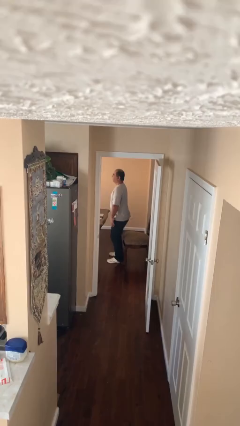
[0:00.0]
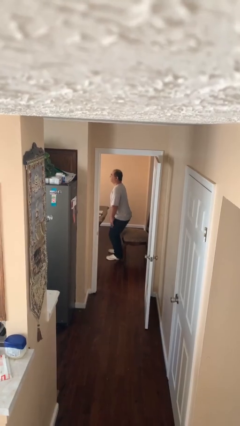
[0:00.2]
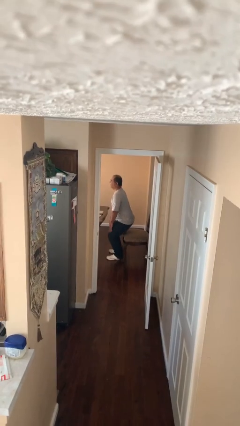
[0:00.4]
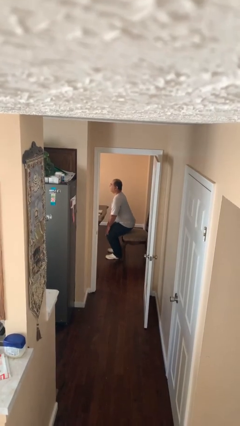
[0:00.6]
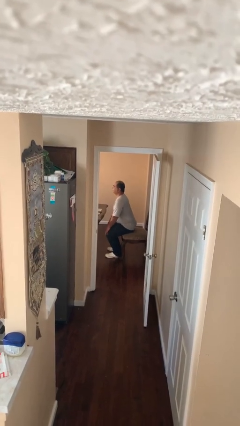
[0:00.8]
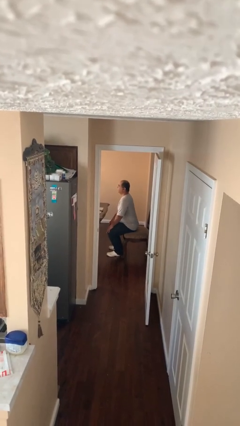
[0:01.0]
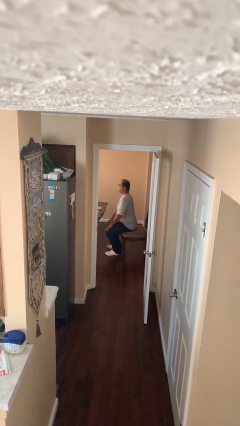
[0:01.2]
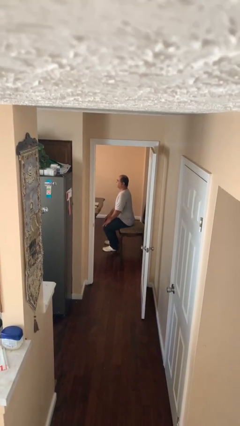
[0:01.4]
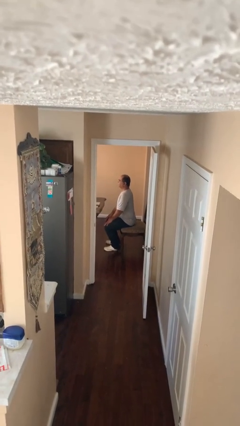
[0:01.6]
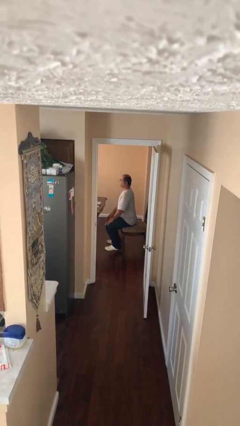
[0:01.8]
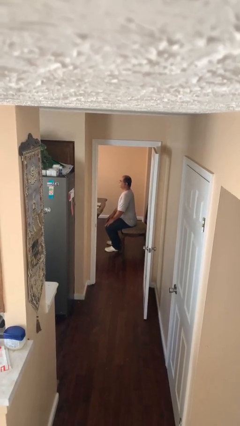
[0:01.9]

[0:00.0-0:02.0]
person sits down

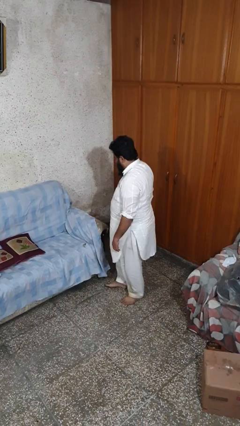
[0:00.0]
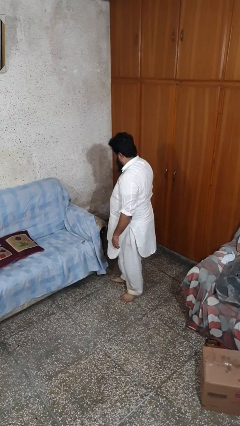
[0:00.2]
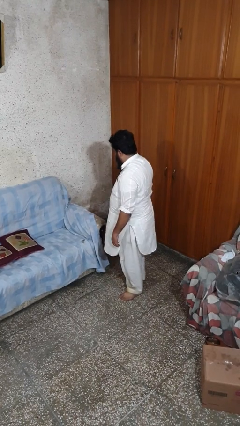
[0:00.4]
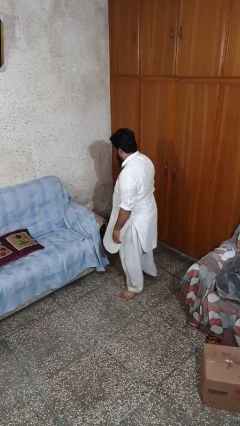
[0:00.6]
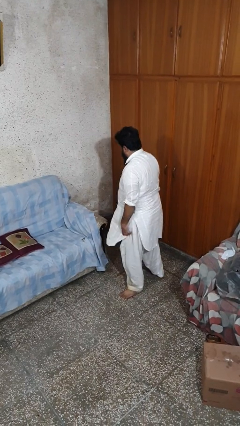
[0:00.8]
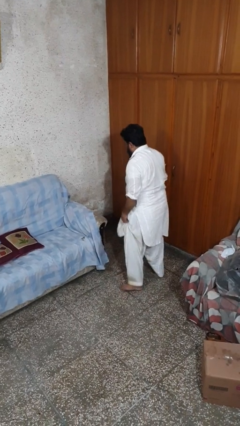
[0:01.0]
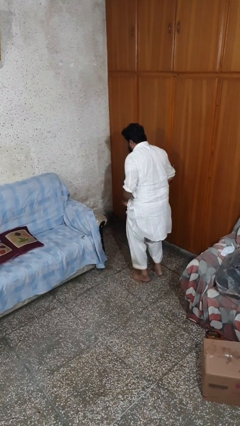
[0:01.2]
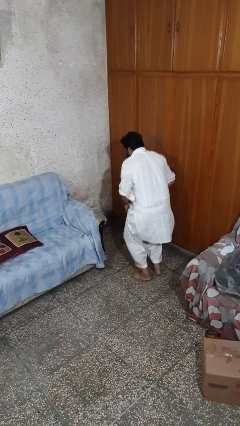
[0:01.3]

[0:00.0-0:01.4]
person searches under couch

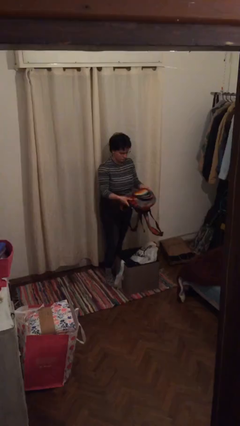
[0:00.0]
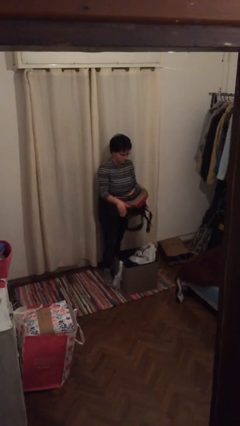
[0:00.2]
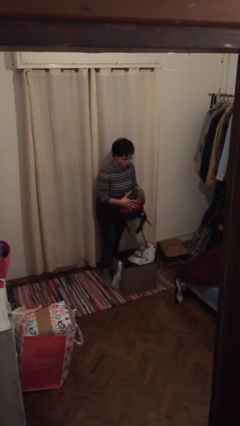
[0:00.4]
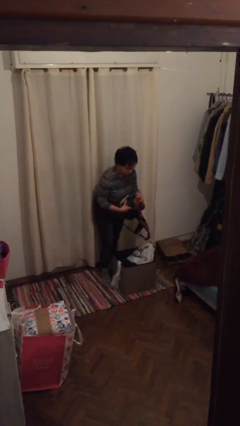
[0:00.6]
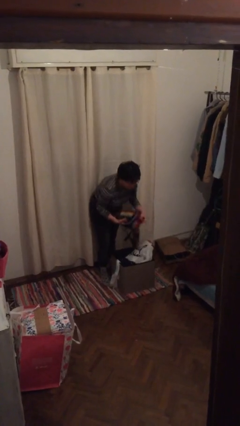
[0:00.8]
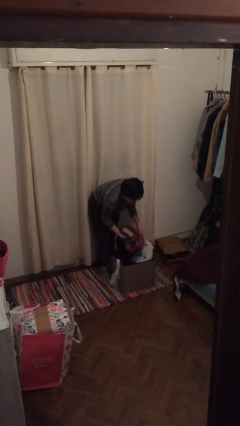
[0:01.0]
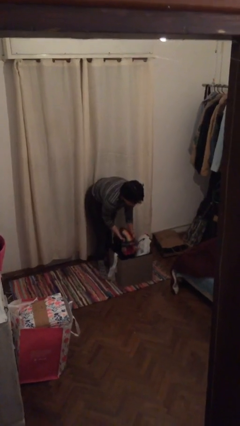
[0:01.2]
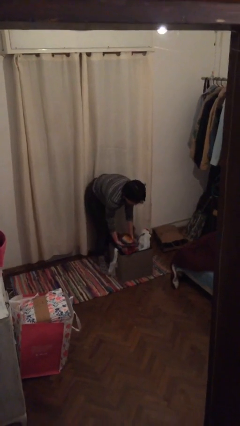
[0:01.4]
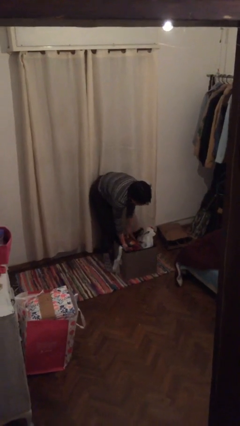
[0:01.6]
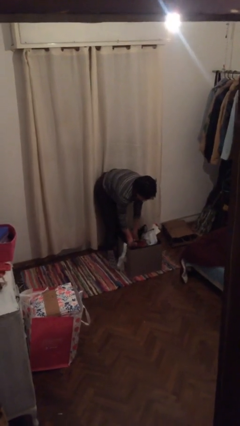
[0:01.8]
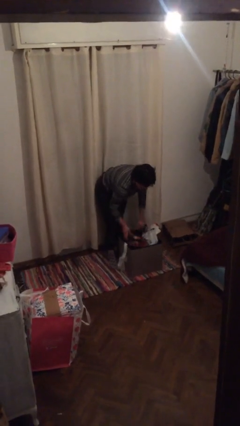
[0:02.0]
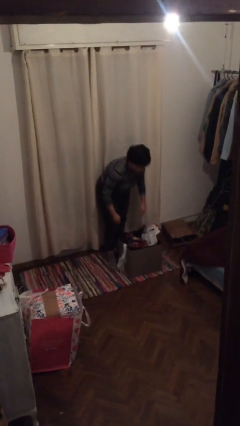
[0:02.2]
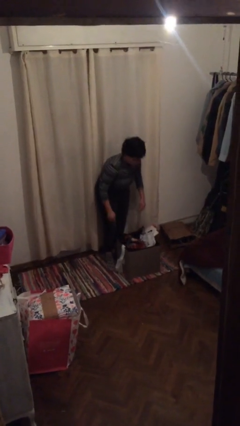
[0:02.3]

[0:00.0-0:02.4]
person puts object into basket

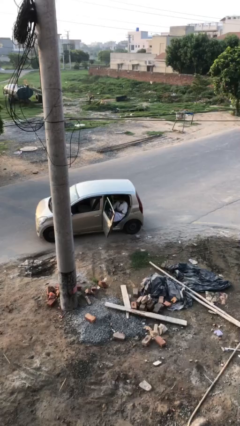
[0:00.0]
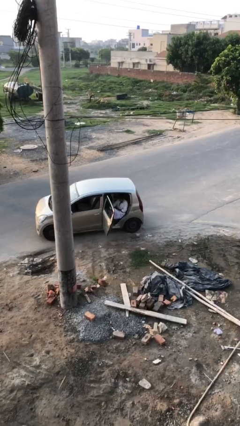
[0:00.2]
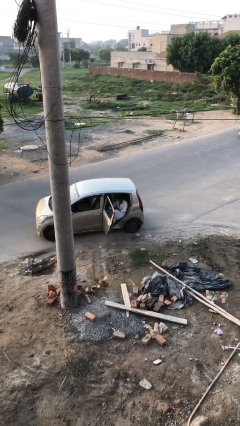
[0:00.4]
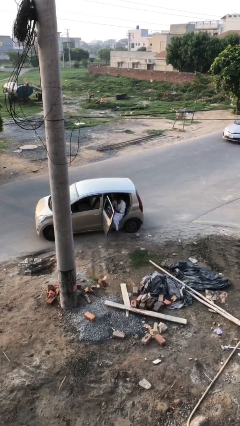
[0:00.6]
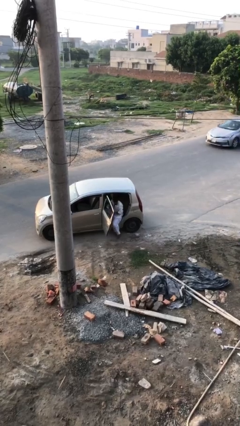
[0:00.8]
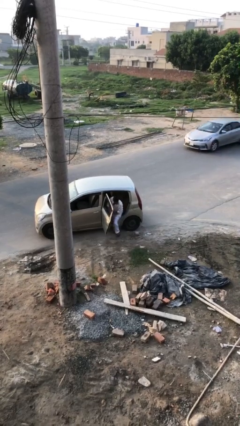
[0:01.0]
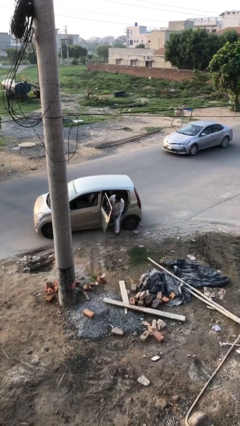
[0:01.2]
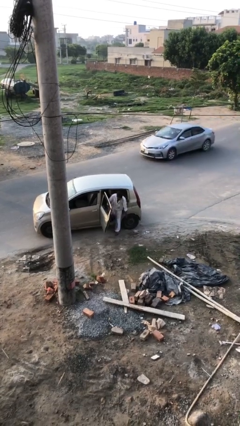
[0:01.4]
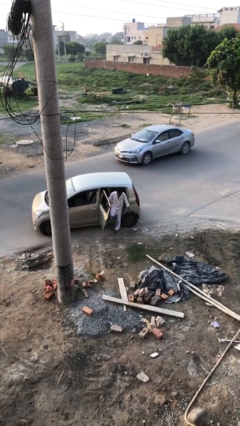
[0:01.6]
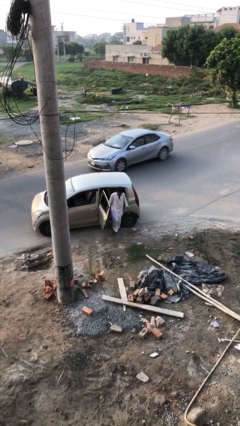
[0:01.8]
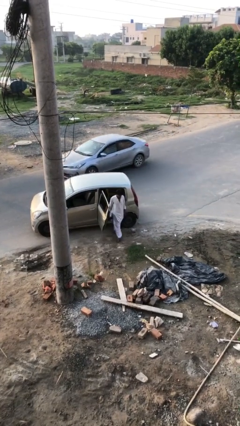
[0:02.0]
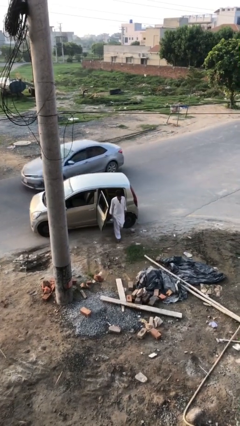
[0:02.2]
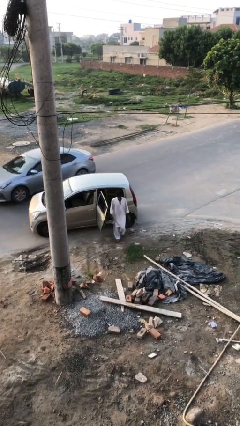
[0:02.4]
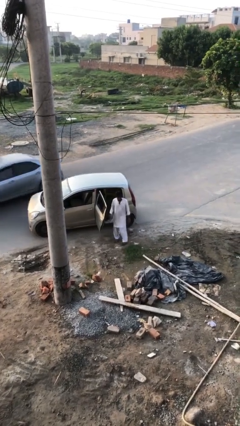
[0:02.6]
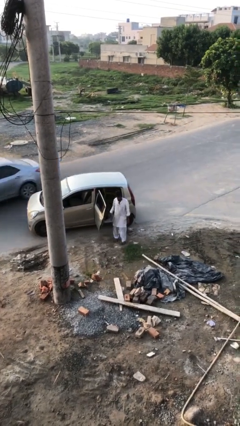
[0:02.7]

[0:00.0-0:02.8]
person exits car

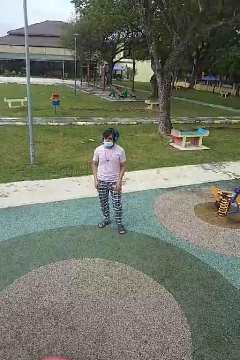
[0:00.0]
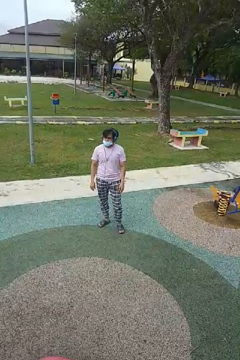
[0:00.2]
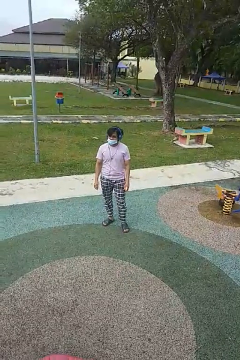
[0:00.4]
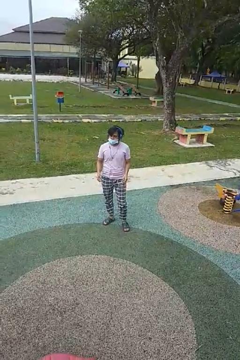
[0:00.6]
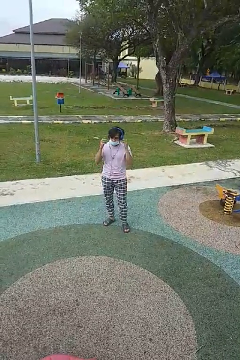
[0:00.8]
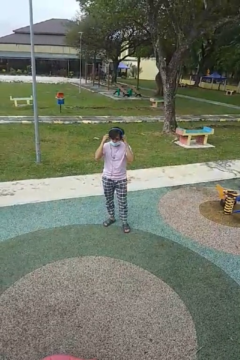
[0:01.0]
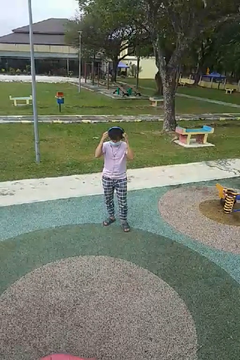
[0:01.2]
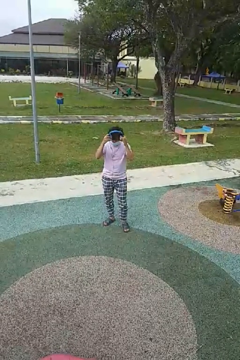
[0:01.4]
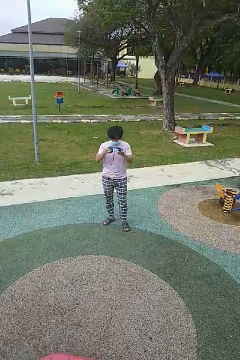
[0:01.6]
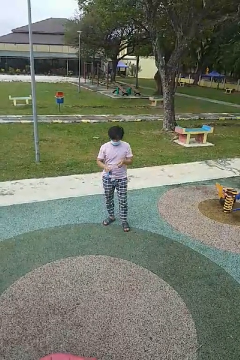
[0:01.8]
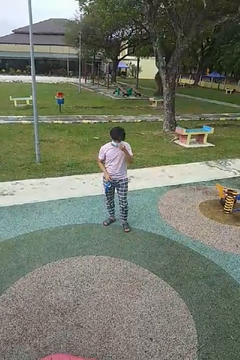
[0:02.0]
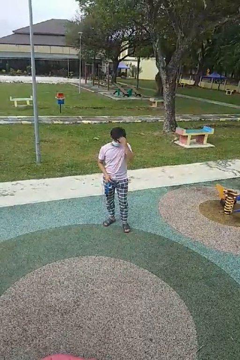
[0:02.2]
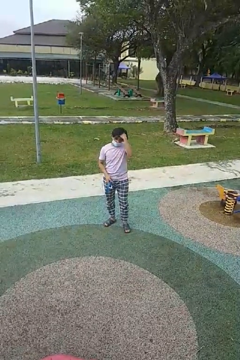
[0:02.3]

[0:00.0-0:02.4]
person takes off headphones

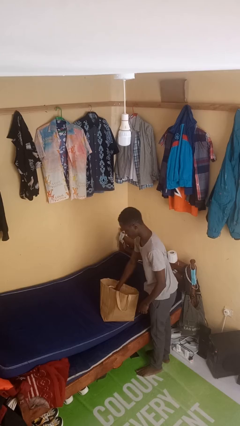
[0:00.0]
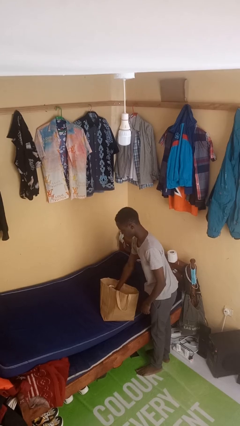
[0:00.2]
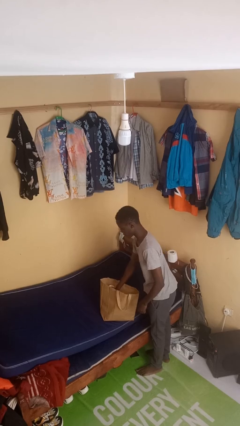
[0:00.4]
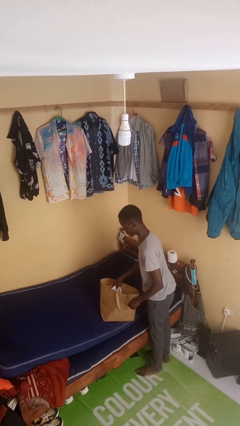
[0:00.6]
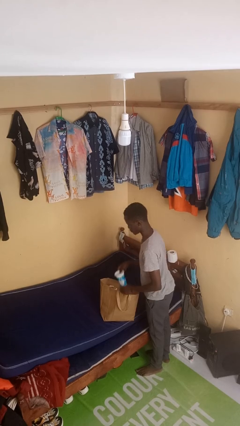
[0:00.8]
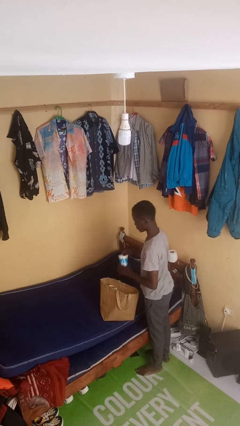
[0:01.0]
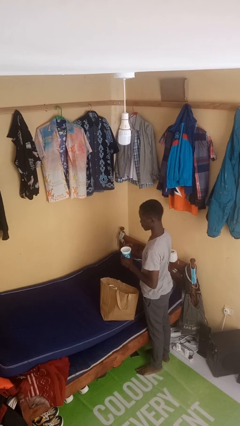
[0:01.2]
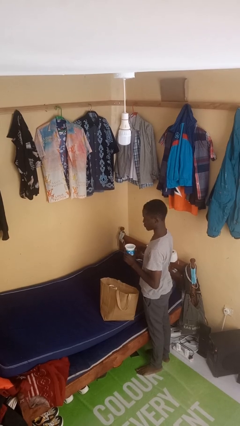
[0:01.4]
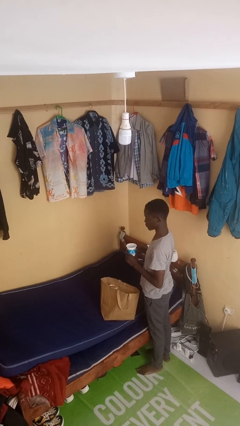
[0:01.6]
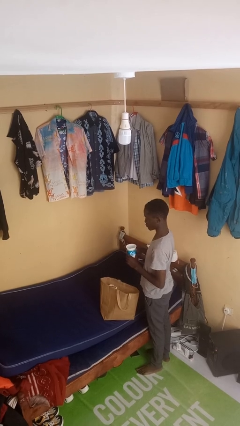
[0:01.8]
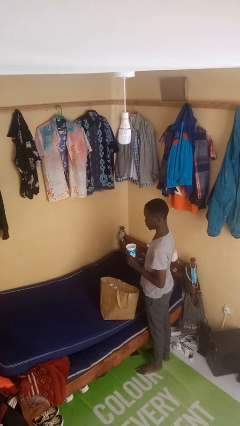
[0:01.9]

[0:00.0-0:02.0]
person takes object from bag

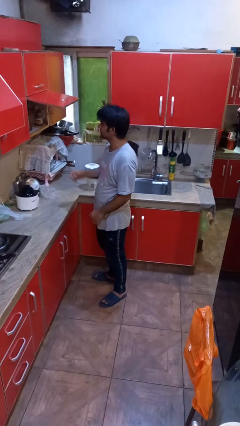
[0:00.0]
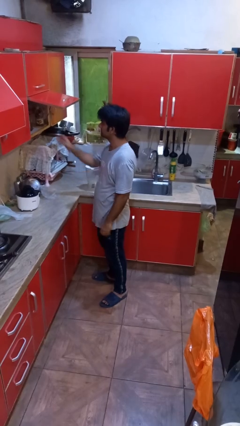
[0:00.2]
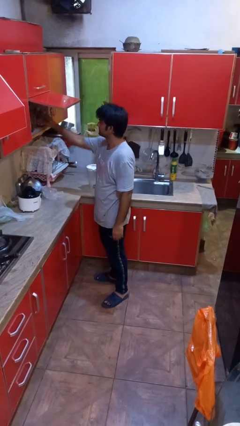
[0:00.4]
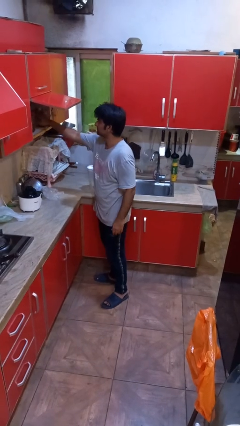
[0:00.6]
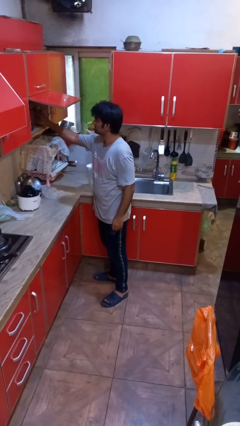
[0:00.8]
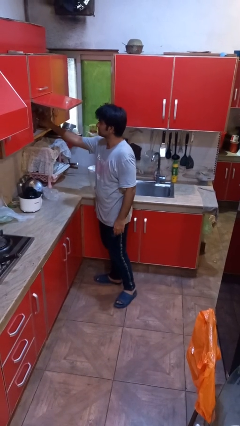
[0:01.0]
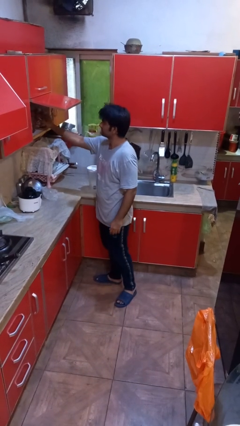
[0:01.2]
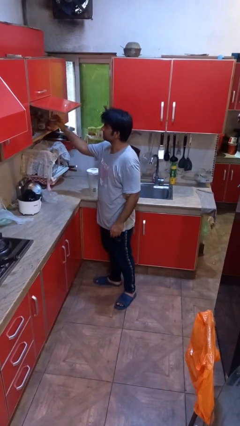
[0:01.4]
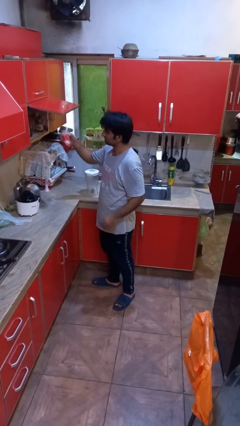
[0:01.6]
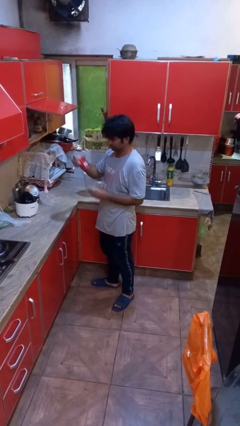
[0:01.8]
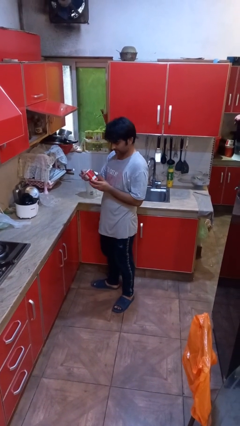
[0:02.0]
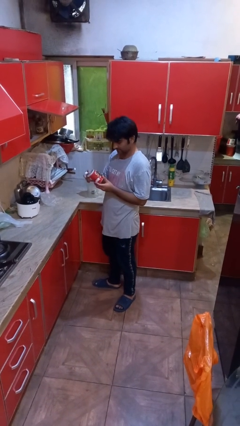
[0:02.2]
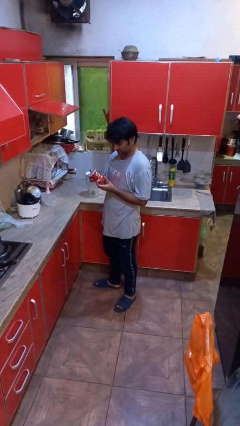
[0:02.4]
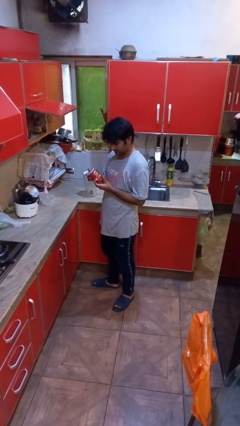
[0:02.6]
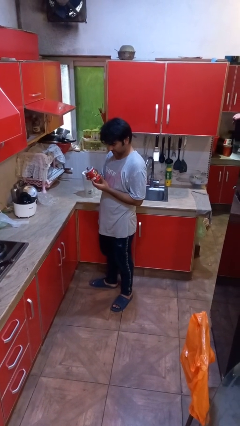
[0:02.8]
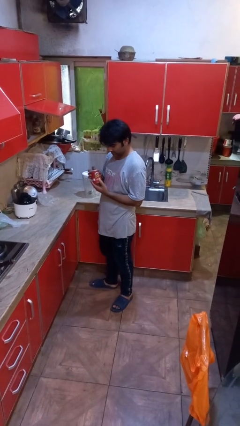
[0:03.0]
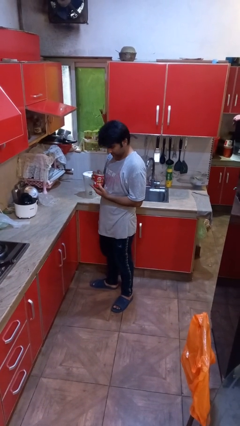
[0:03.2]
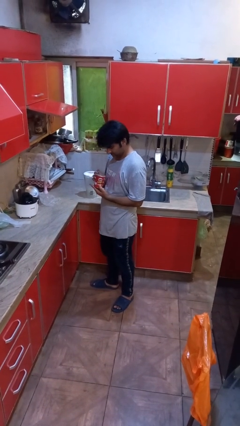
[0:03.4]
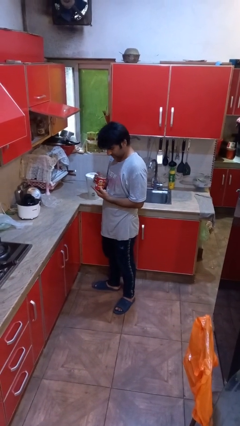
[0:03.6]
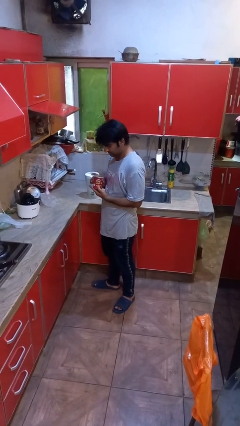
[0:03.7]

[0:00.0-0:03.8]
person picks up object from cabinet

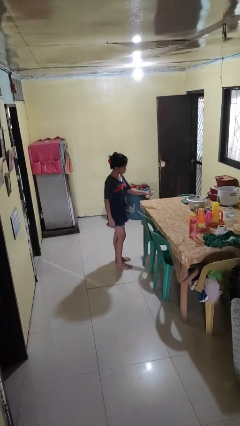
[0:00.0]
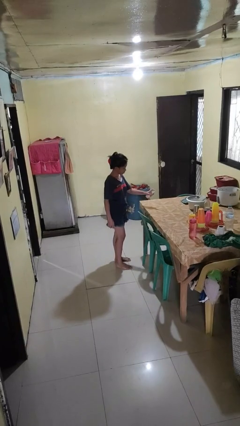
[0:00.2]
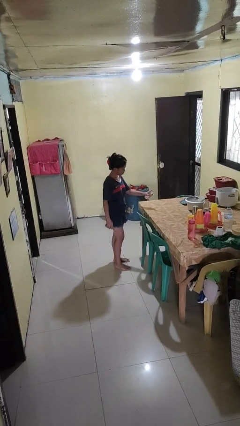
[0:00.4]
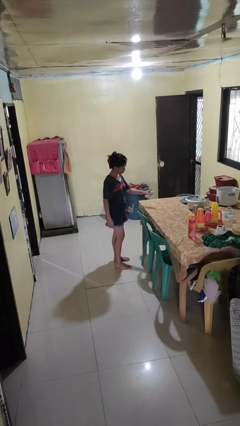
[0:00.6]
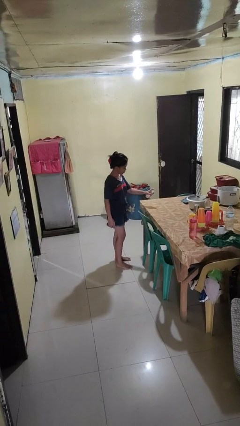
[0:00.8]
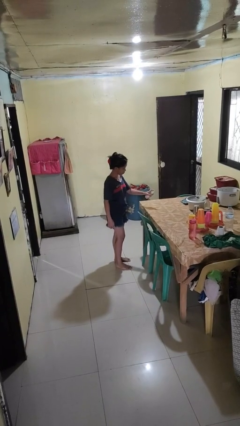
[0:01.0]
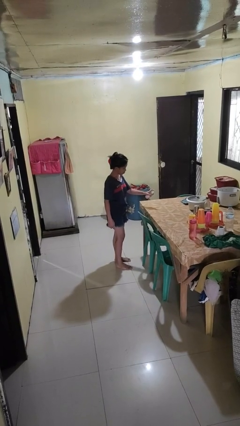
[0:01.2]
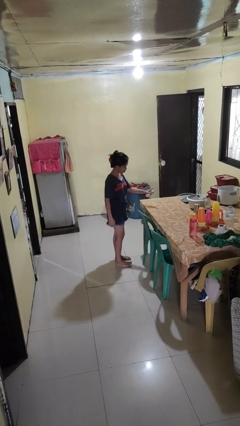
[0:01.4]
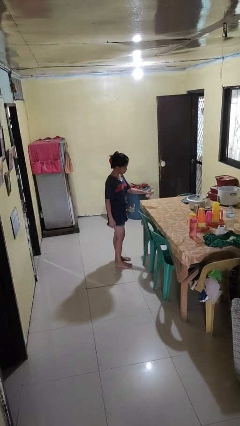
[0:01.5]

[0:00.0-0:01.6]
person sprays from bottle
